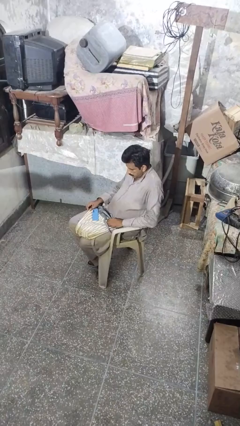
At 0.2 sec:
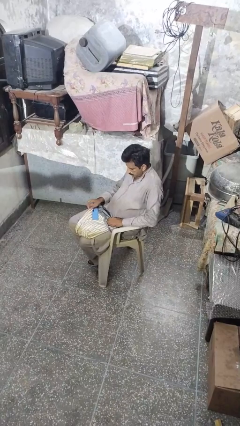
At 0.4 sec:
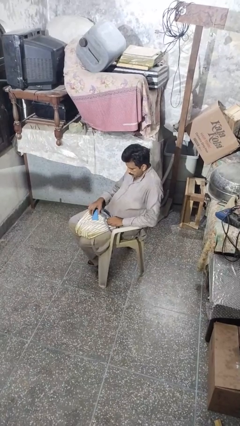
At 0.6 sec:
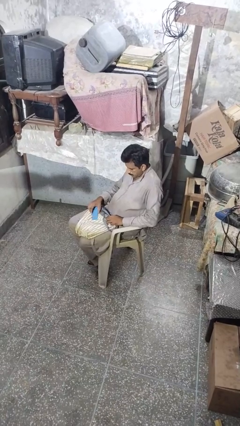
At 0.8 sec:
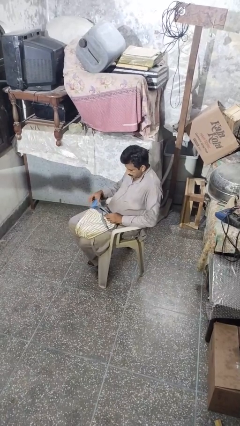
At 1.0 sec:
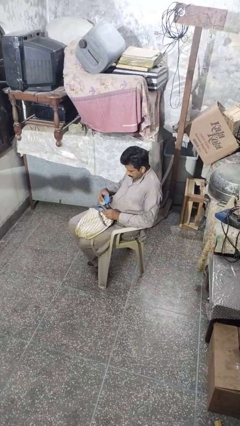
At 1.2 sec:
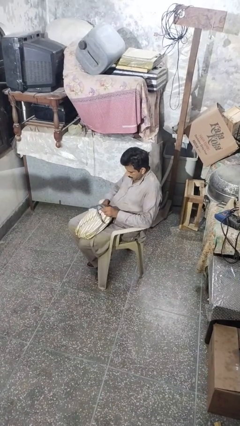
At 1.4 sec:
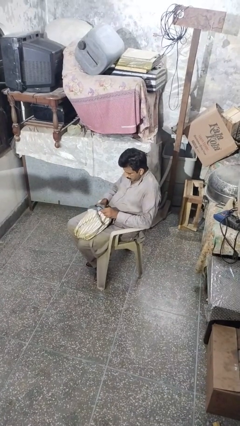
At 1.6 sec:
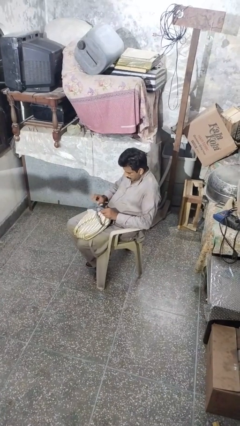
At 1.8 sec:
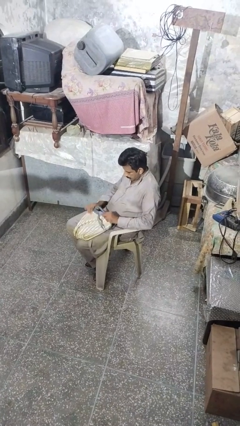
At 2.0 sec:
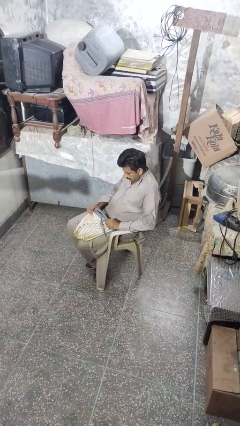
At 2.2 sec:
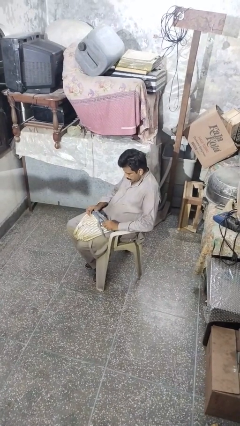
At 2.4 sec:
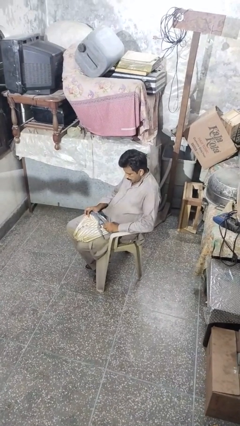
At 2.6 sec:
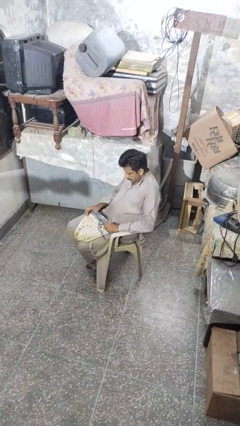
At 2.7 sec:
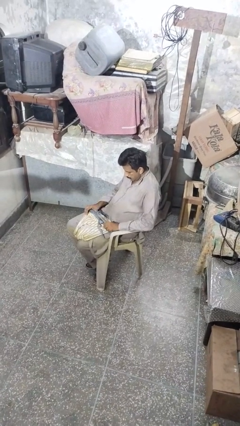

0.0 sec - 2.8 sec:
person puts object into purse

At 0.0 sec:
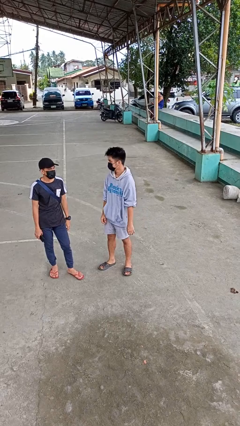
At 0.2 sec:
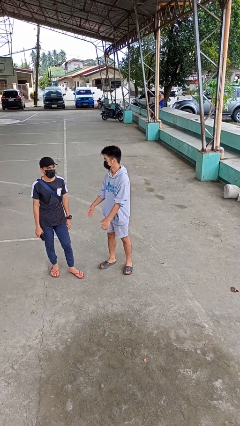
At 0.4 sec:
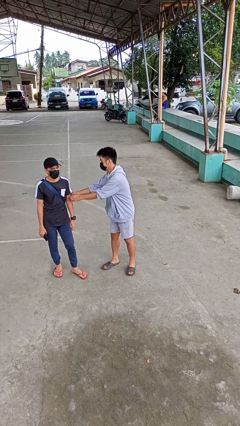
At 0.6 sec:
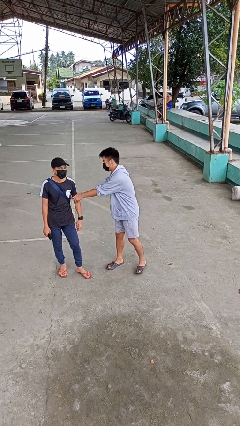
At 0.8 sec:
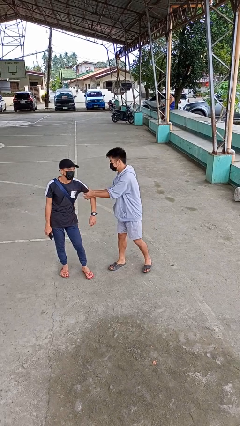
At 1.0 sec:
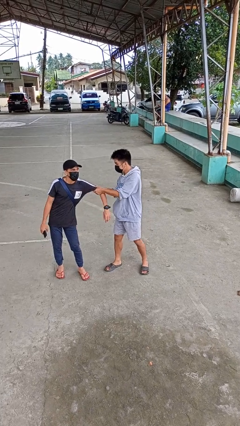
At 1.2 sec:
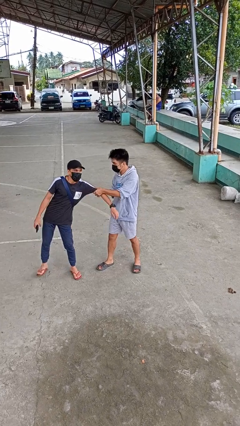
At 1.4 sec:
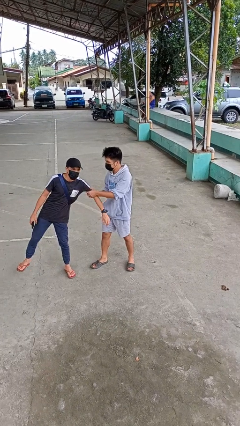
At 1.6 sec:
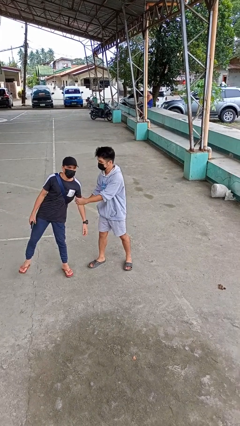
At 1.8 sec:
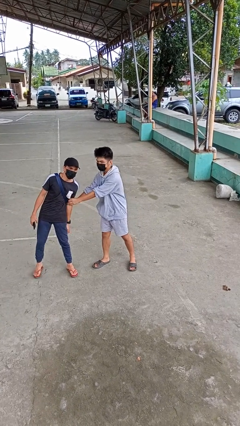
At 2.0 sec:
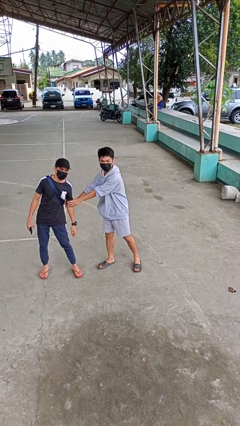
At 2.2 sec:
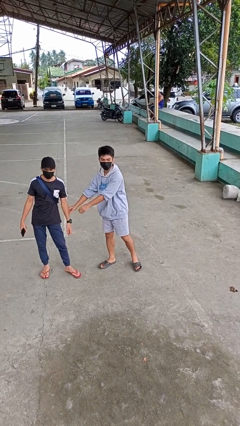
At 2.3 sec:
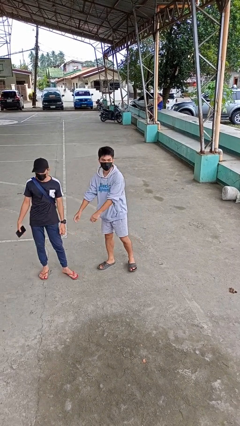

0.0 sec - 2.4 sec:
person grabs person by bicep

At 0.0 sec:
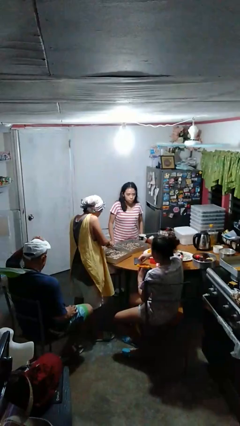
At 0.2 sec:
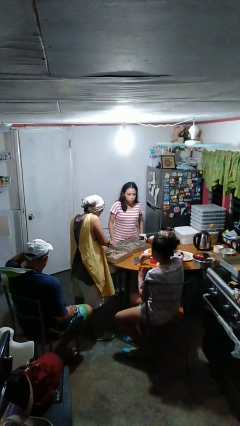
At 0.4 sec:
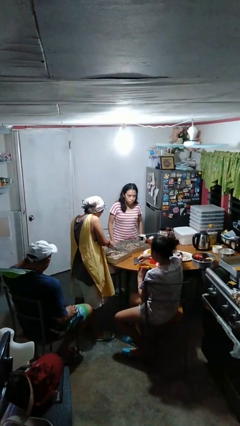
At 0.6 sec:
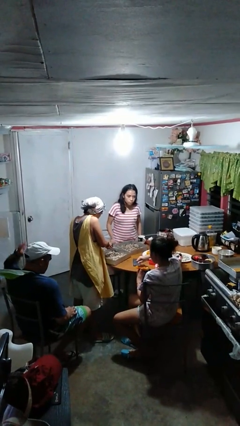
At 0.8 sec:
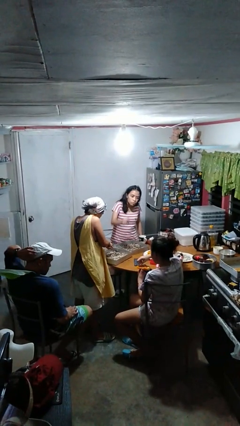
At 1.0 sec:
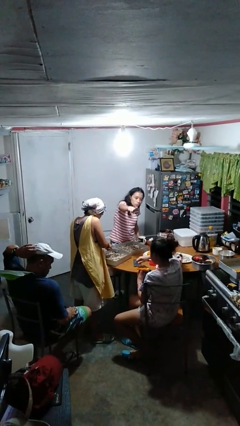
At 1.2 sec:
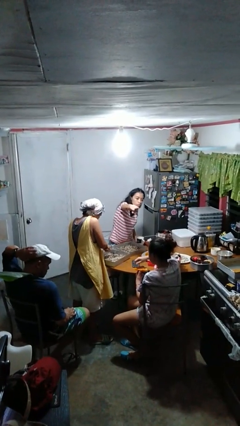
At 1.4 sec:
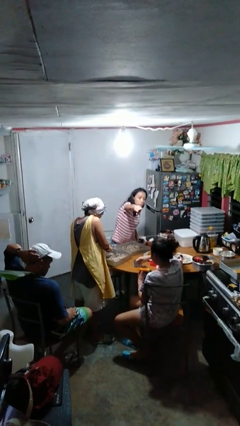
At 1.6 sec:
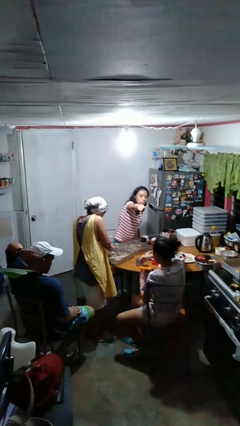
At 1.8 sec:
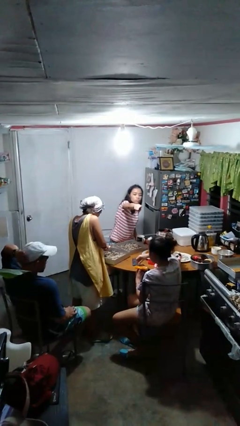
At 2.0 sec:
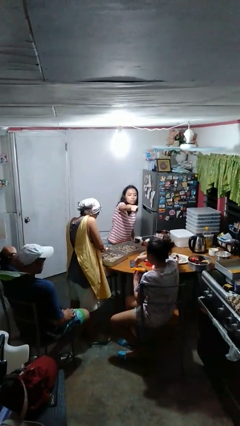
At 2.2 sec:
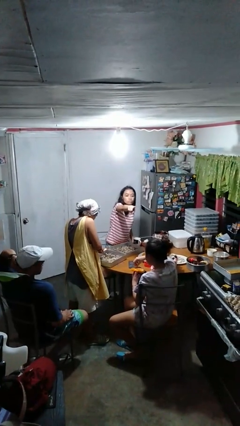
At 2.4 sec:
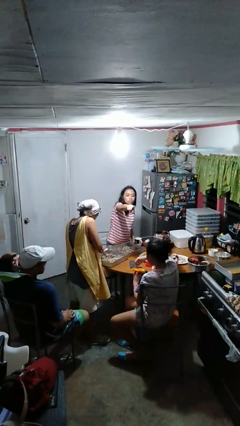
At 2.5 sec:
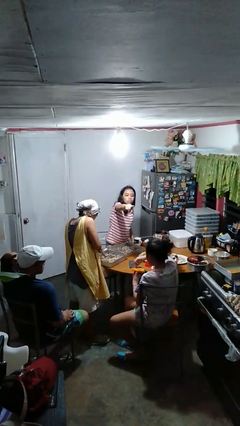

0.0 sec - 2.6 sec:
person points at person

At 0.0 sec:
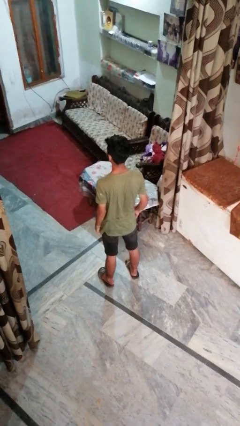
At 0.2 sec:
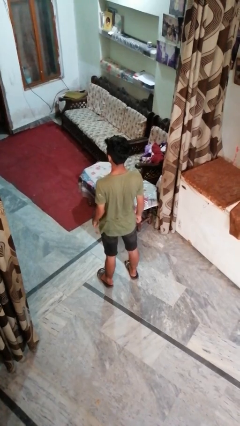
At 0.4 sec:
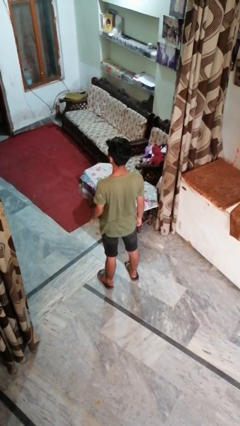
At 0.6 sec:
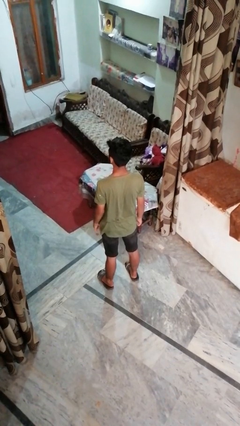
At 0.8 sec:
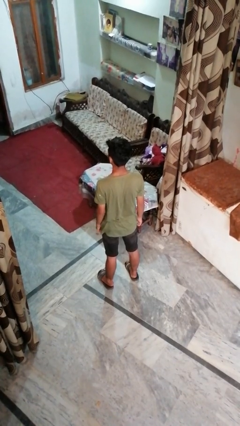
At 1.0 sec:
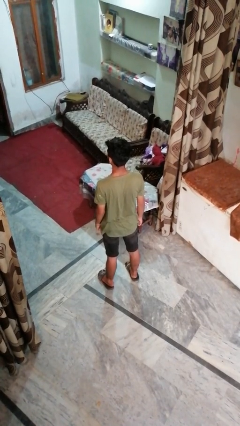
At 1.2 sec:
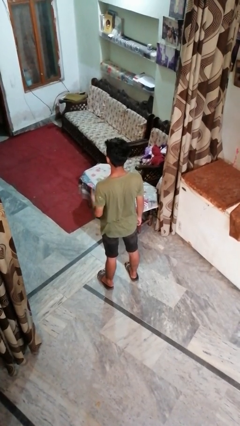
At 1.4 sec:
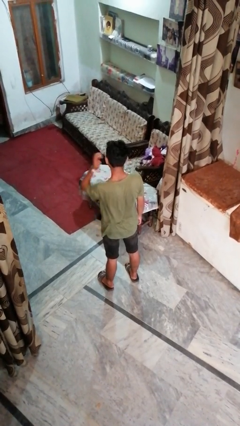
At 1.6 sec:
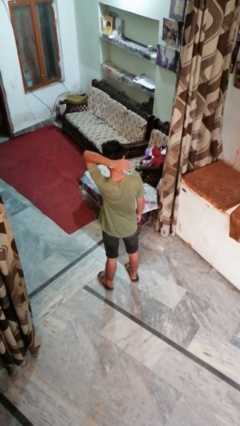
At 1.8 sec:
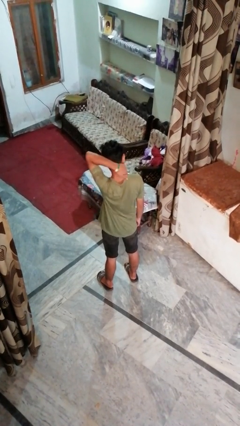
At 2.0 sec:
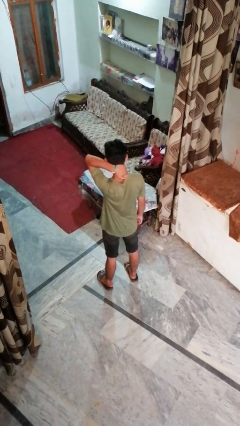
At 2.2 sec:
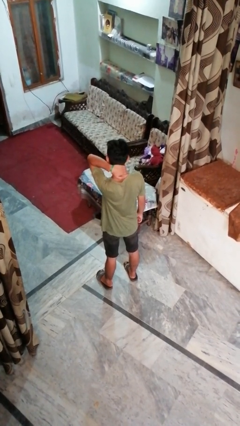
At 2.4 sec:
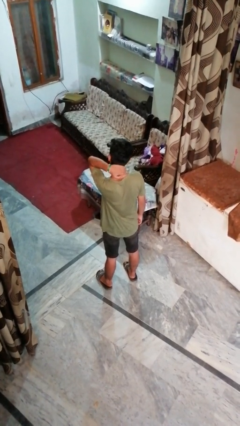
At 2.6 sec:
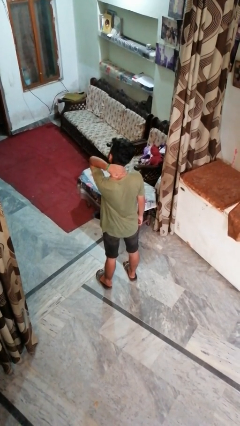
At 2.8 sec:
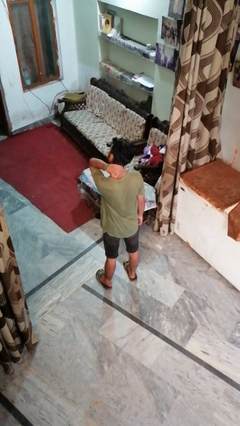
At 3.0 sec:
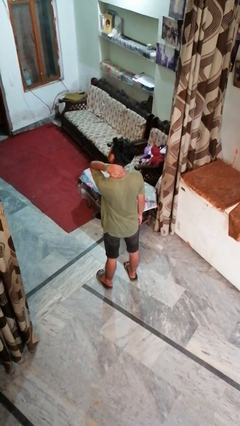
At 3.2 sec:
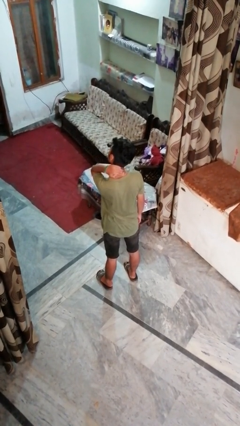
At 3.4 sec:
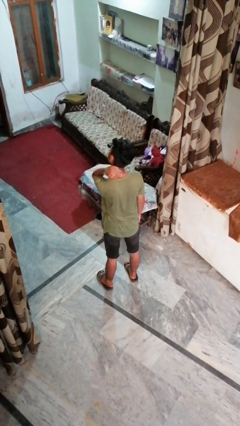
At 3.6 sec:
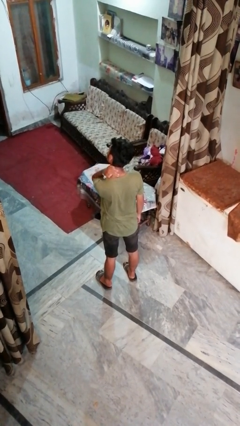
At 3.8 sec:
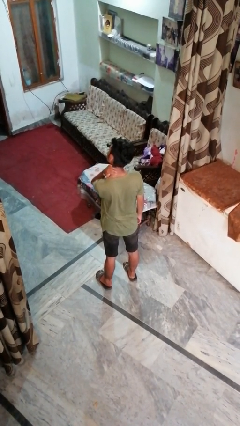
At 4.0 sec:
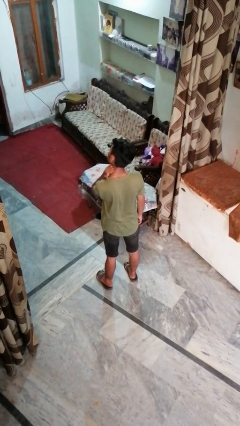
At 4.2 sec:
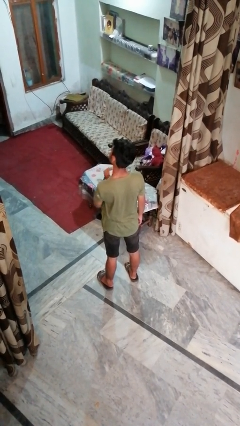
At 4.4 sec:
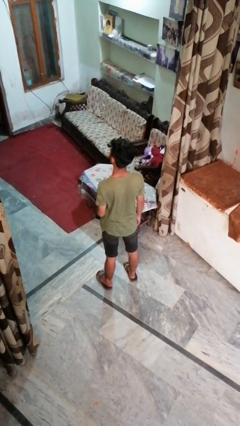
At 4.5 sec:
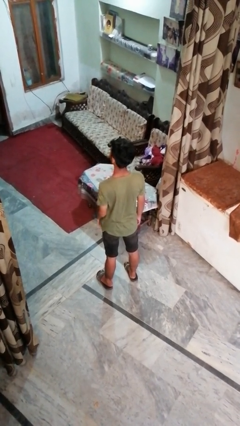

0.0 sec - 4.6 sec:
person rubs neck

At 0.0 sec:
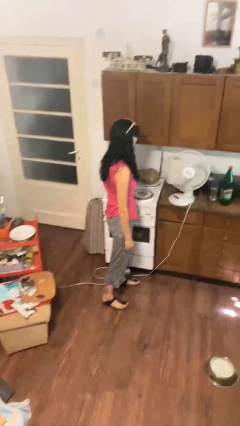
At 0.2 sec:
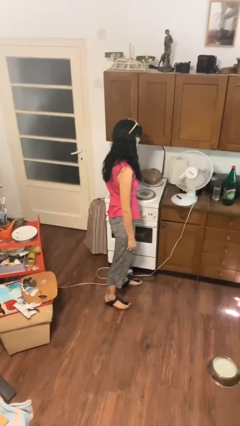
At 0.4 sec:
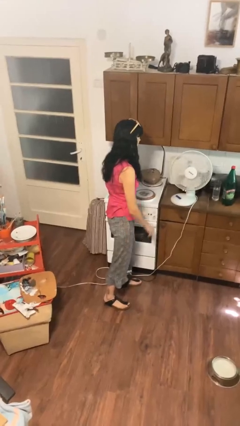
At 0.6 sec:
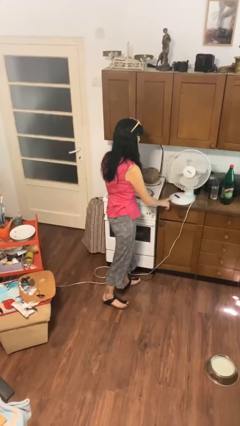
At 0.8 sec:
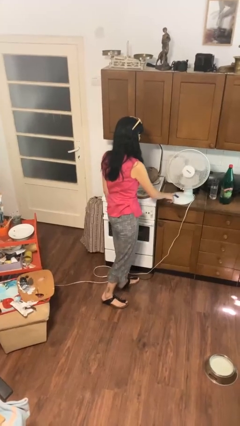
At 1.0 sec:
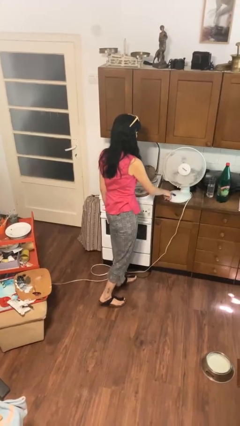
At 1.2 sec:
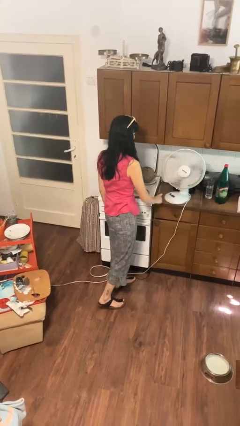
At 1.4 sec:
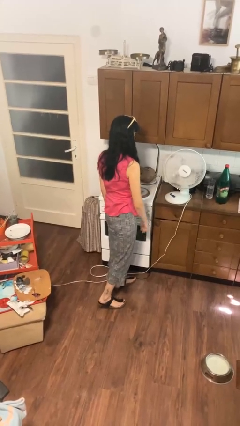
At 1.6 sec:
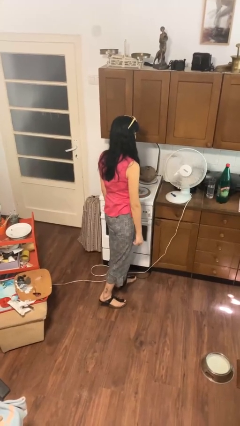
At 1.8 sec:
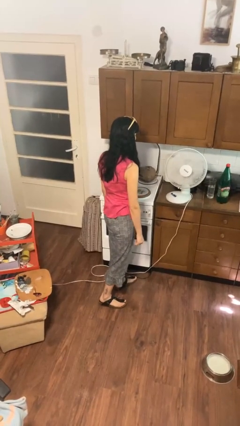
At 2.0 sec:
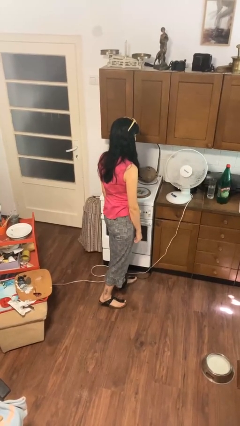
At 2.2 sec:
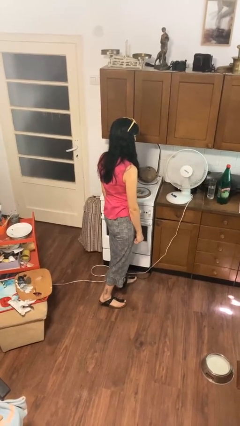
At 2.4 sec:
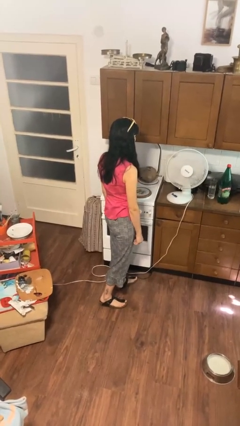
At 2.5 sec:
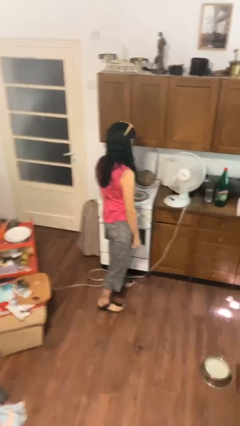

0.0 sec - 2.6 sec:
person turns on fan

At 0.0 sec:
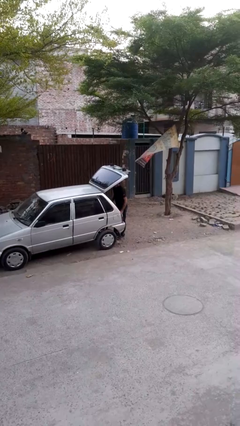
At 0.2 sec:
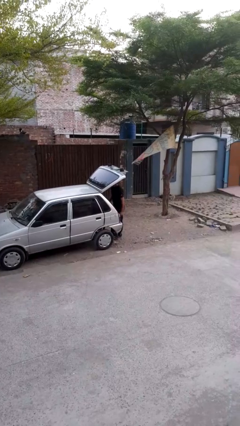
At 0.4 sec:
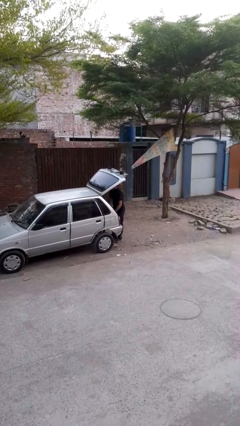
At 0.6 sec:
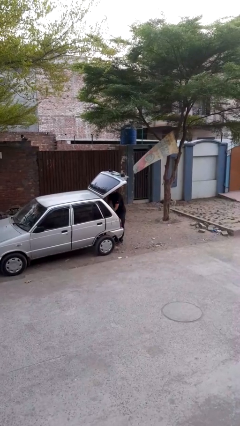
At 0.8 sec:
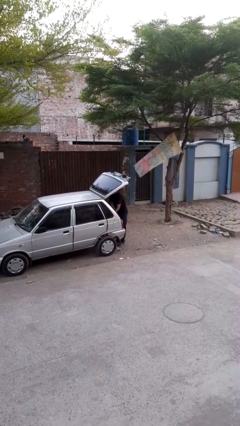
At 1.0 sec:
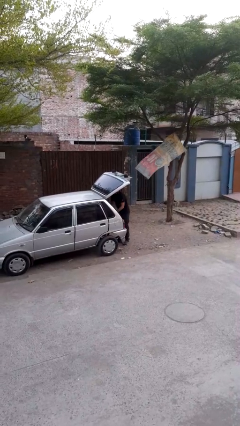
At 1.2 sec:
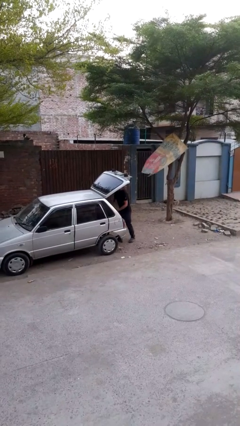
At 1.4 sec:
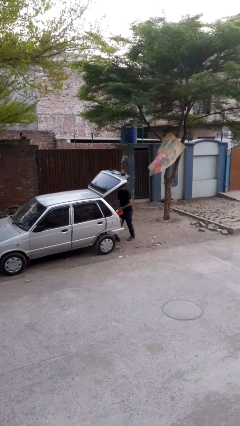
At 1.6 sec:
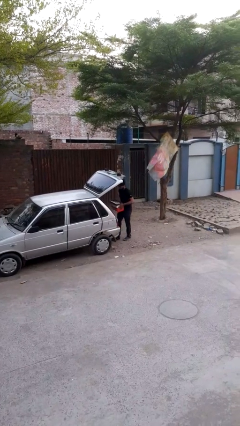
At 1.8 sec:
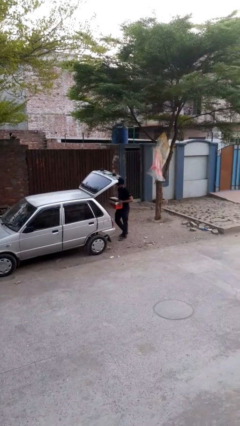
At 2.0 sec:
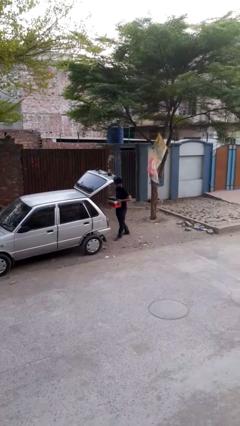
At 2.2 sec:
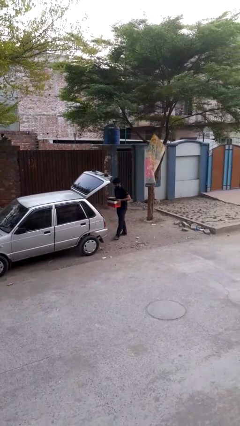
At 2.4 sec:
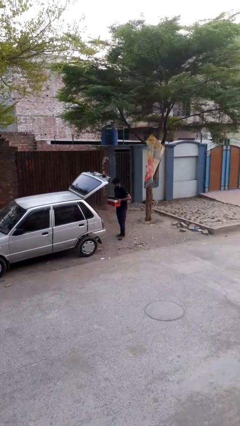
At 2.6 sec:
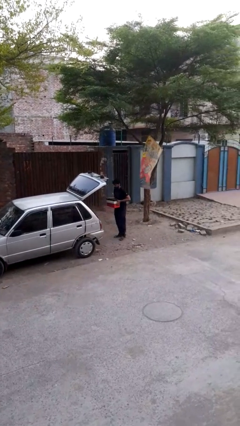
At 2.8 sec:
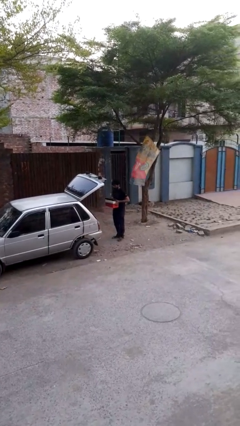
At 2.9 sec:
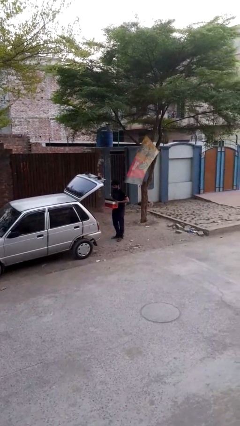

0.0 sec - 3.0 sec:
person unloads car
